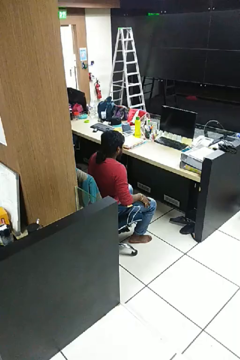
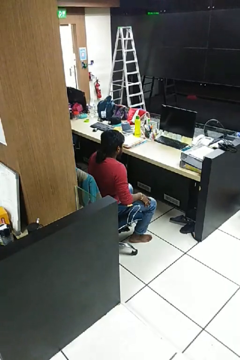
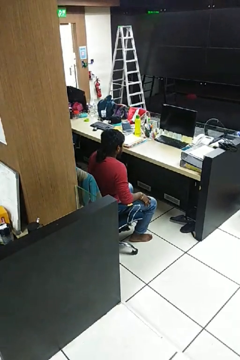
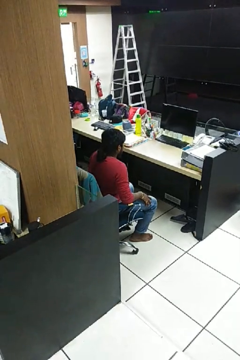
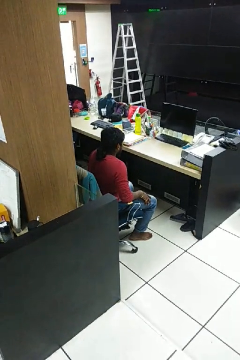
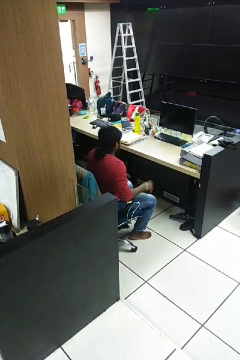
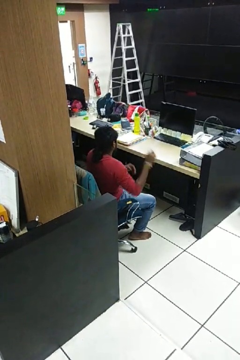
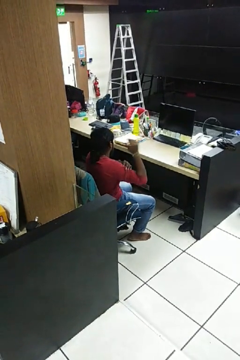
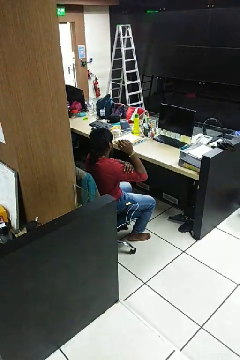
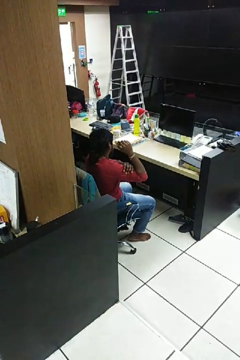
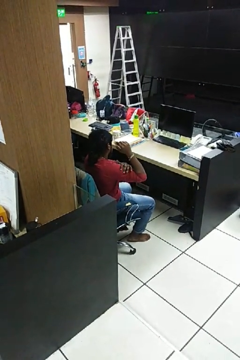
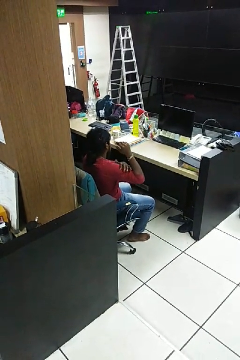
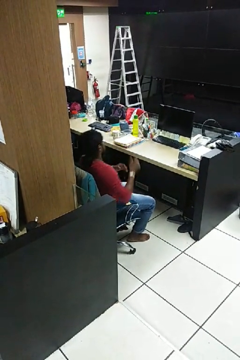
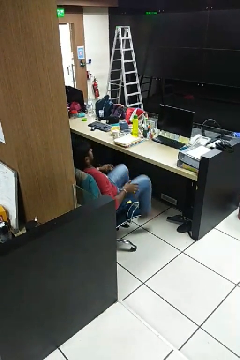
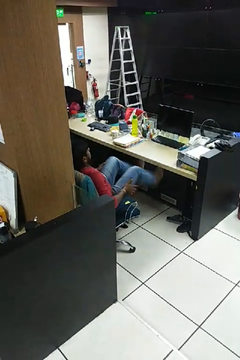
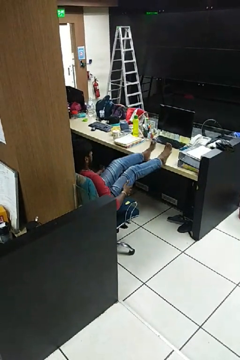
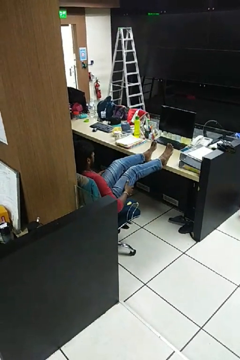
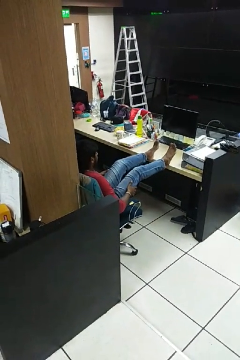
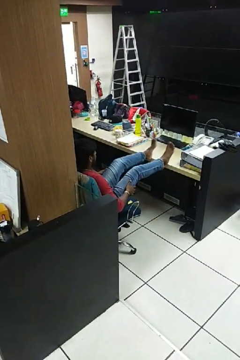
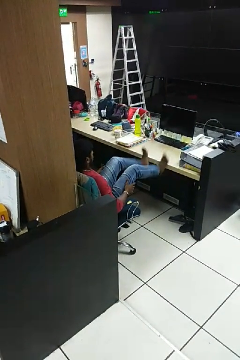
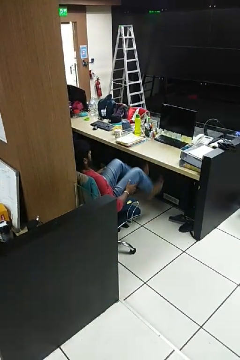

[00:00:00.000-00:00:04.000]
person puts feet up

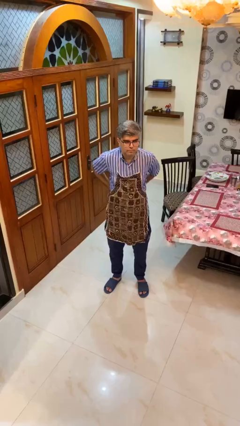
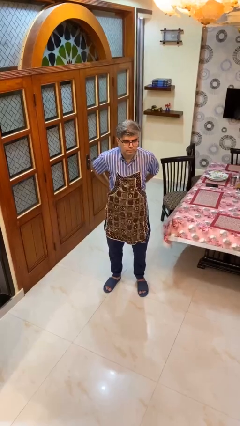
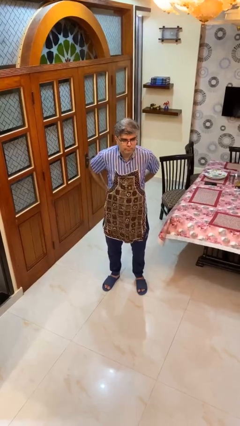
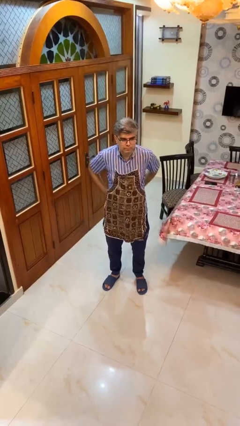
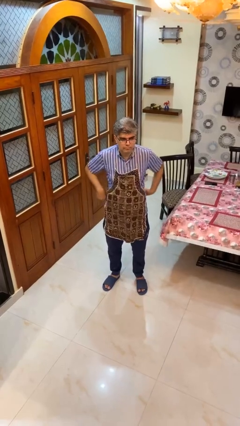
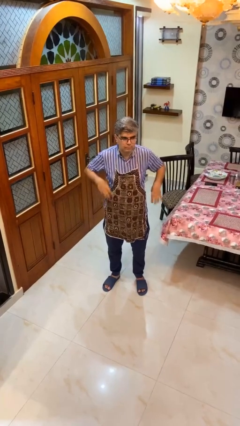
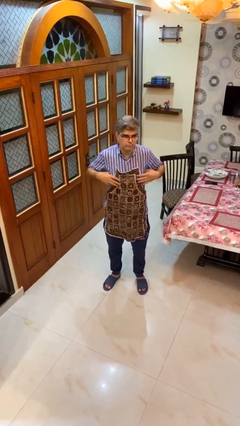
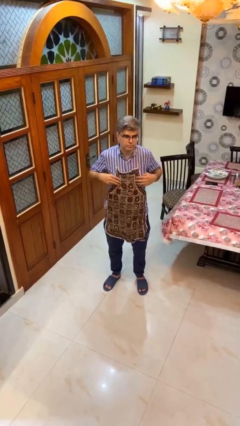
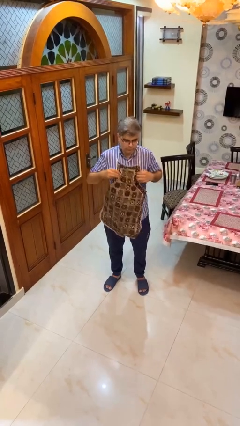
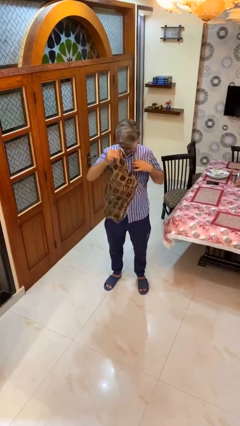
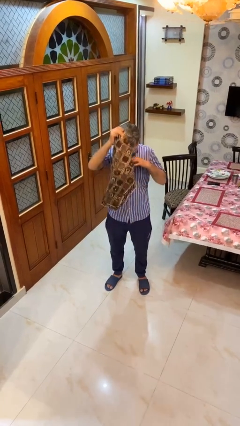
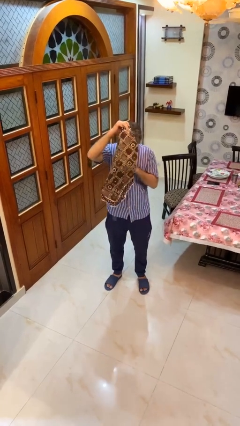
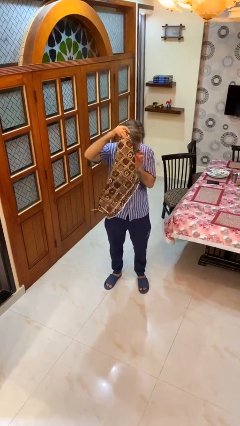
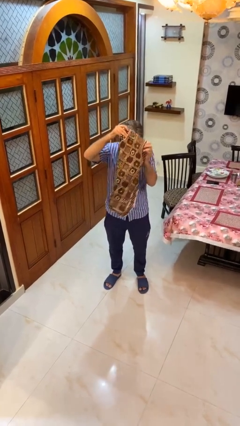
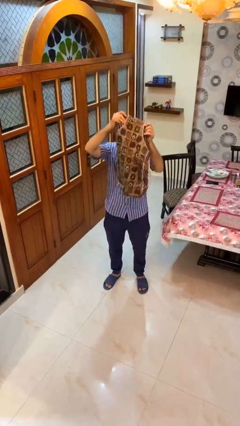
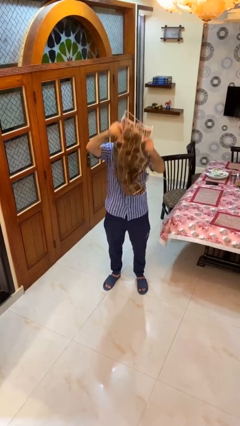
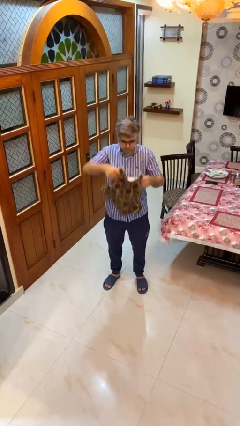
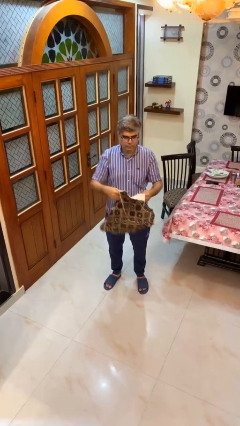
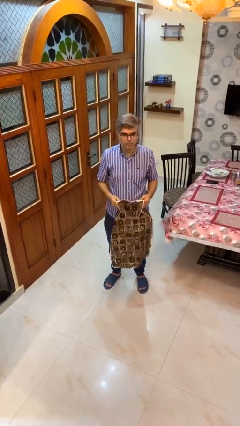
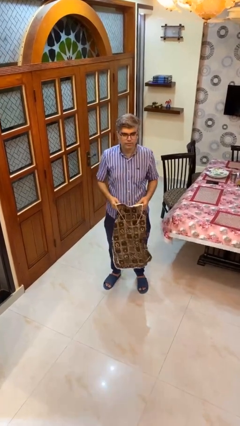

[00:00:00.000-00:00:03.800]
person takes off apron

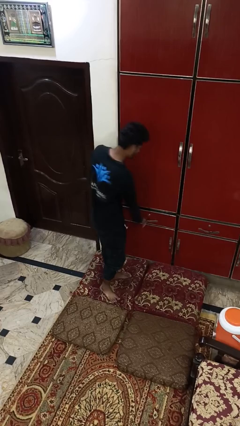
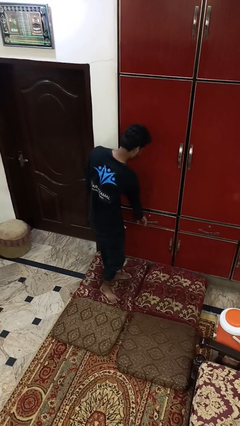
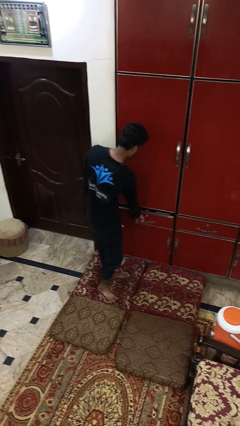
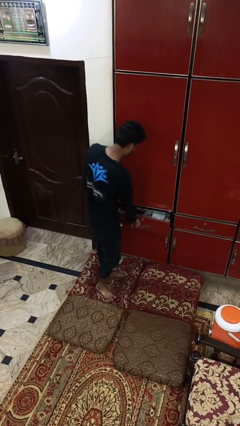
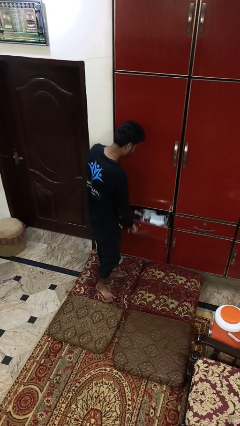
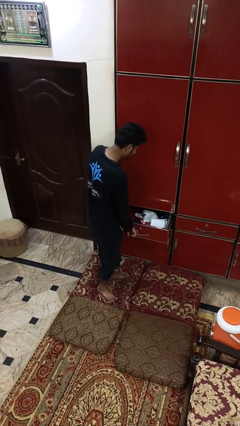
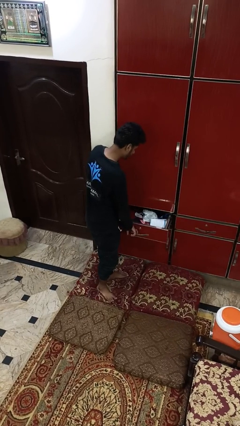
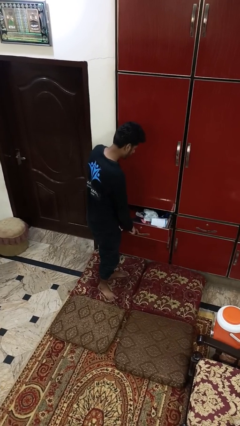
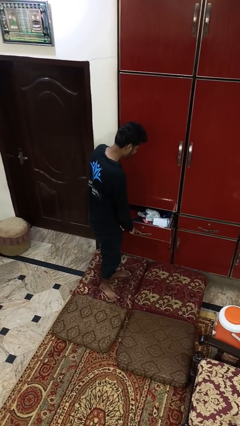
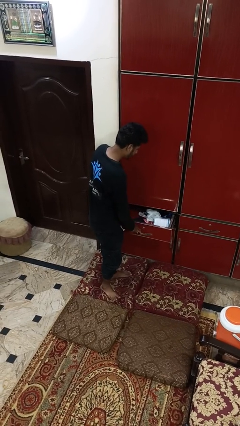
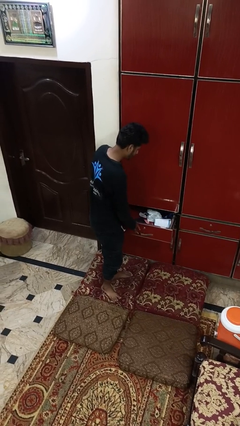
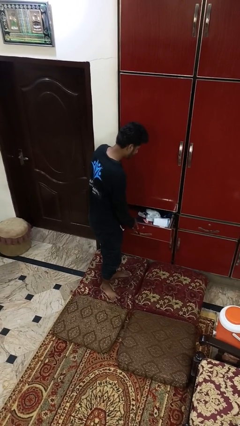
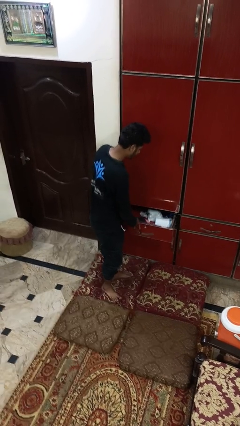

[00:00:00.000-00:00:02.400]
person opens dresser drawer

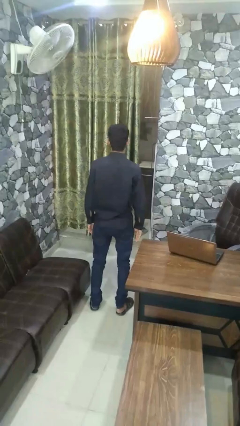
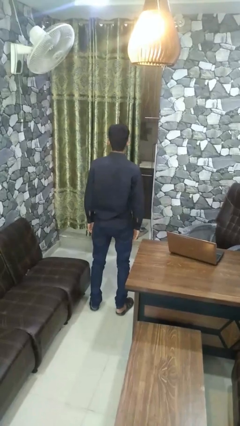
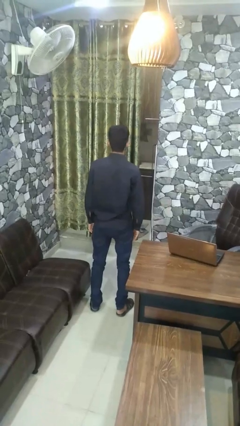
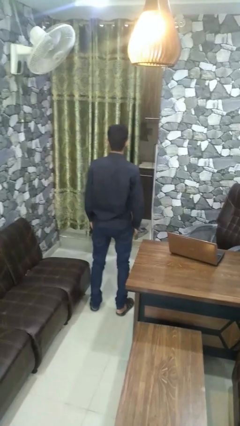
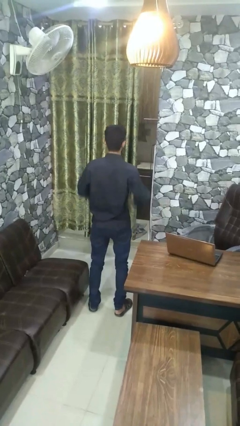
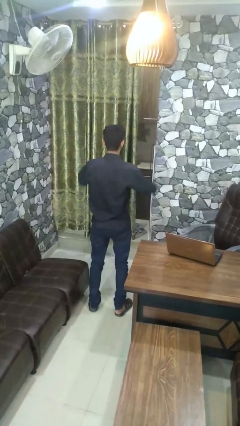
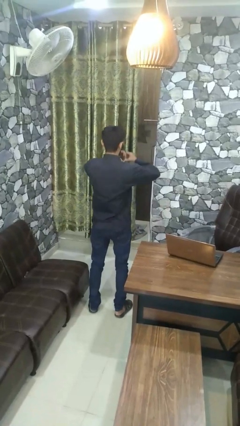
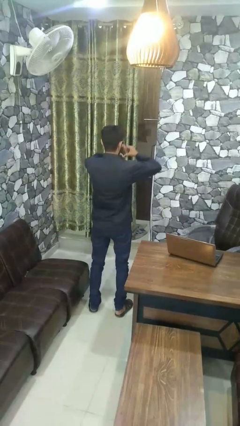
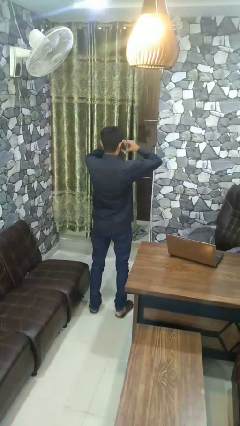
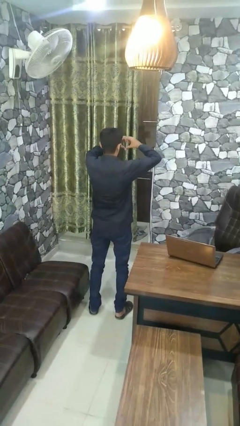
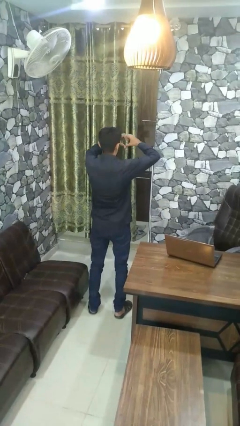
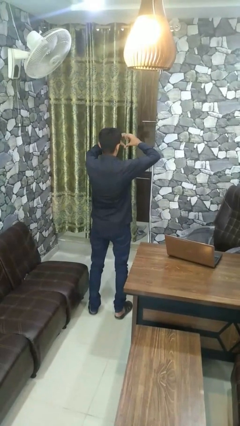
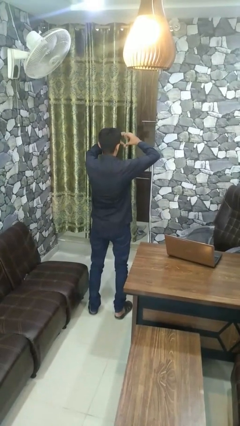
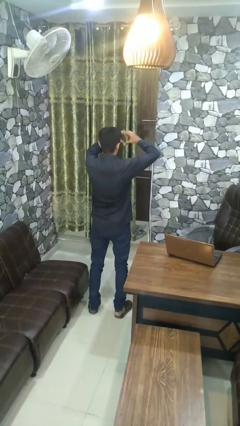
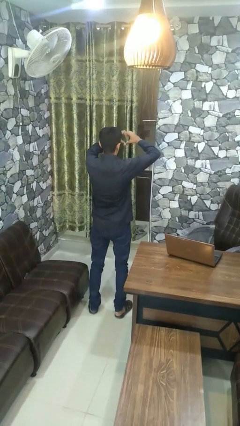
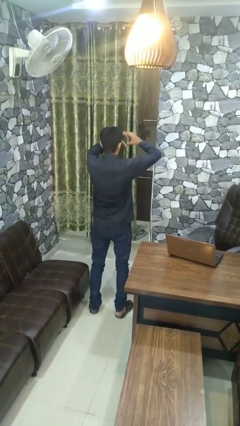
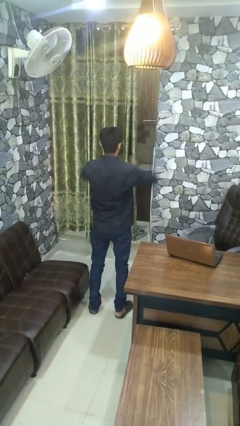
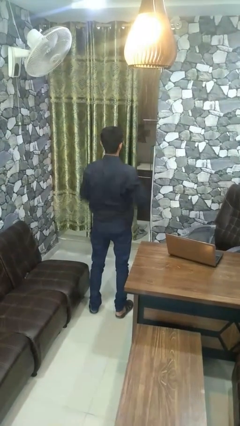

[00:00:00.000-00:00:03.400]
person gestures heart

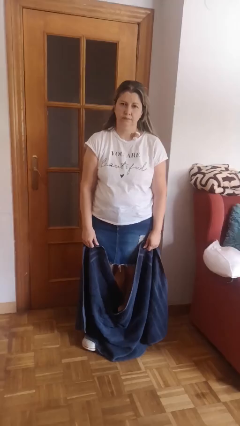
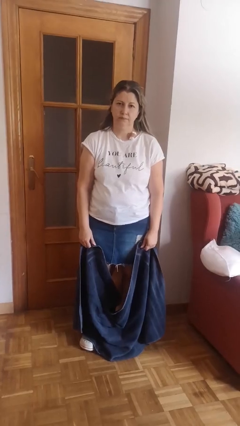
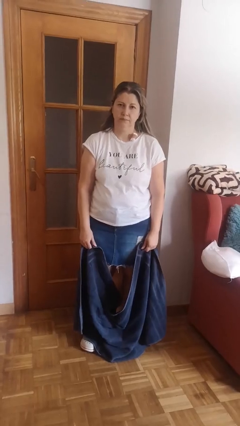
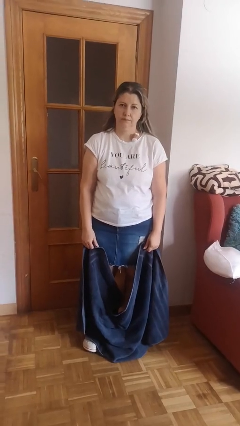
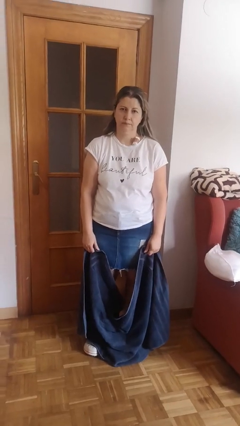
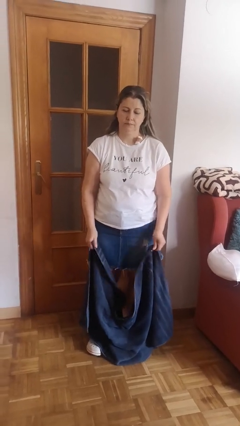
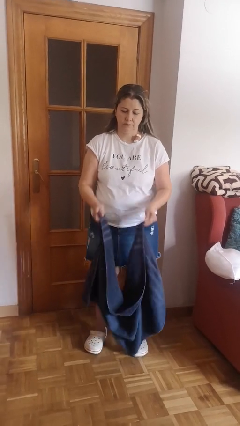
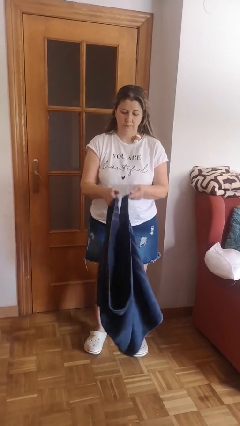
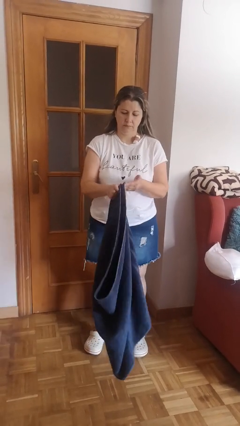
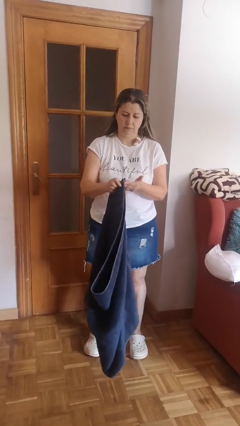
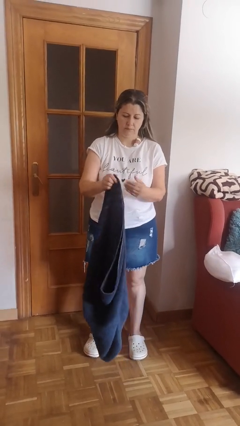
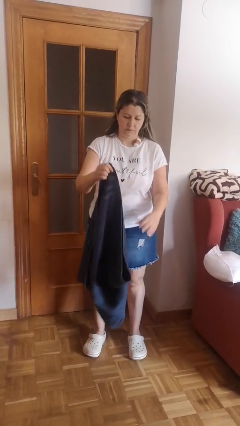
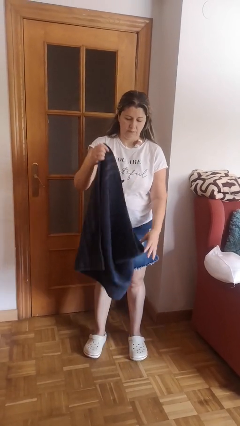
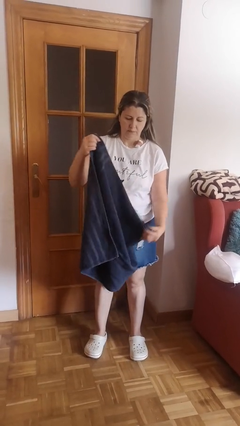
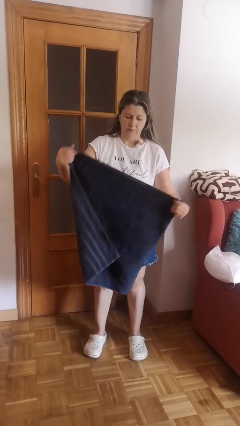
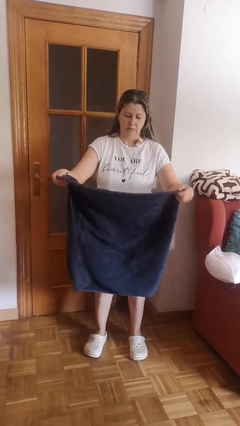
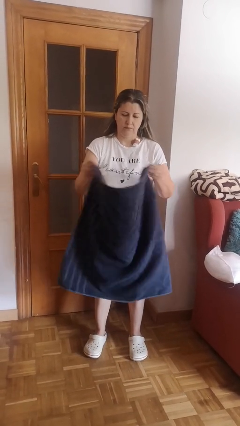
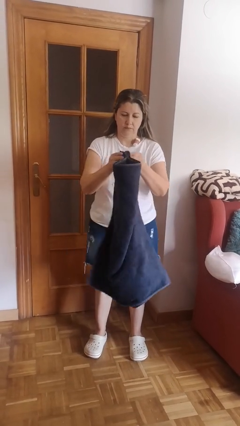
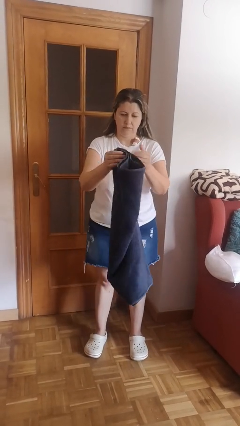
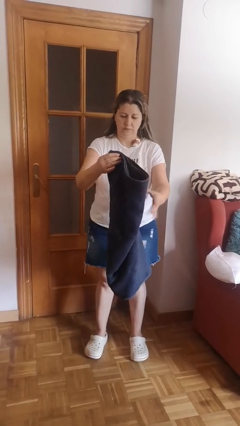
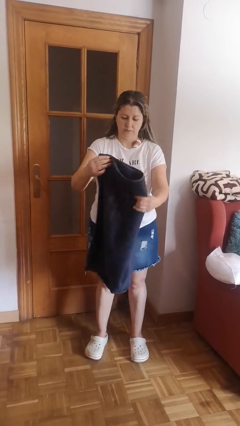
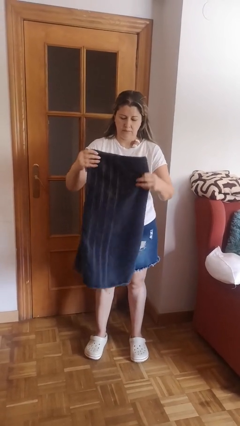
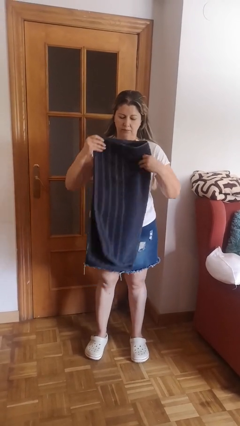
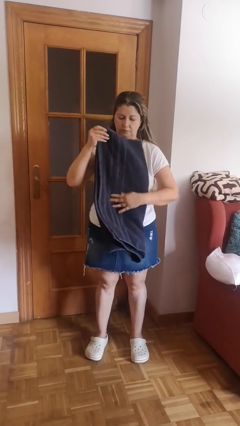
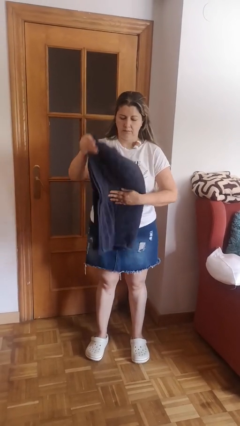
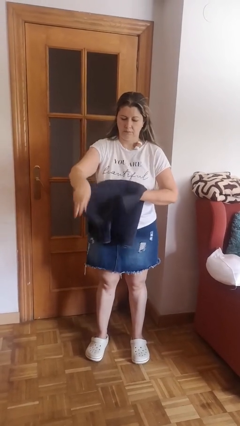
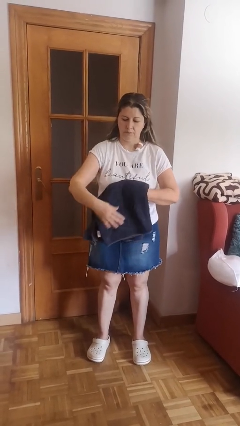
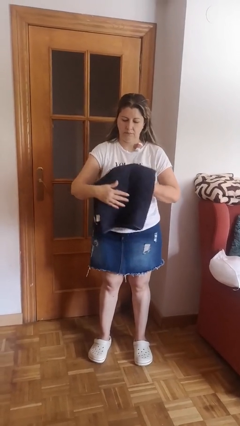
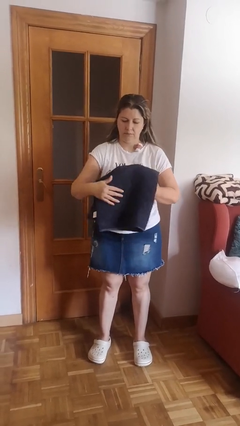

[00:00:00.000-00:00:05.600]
person folds towel
